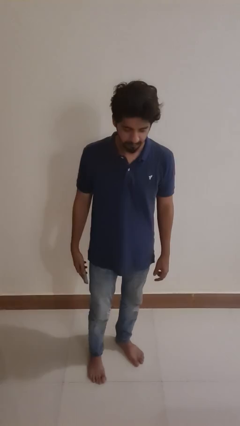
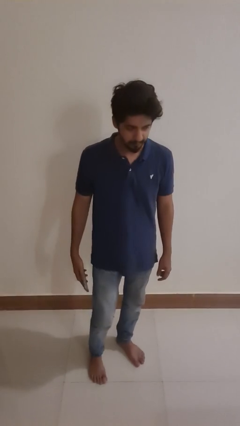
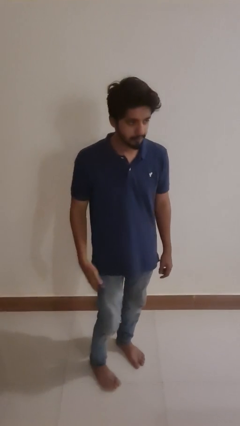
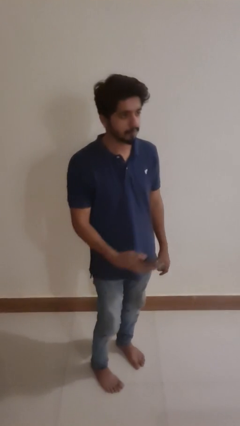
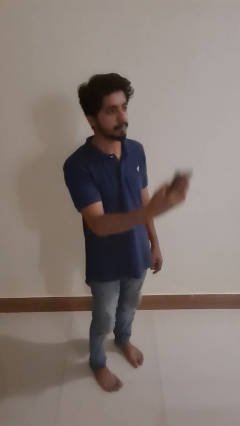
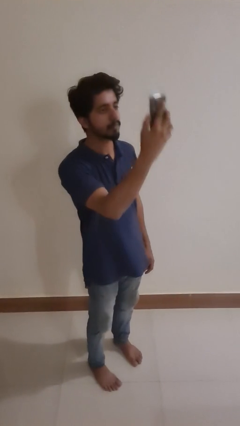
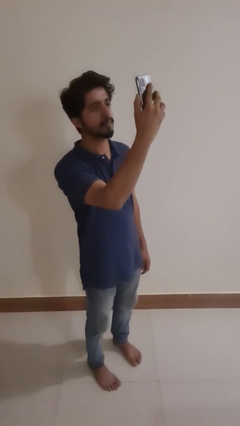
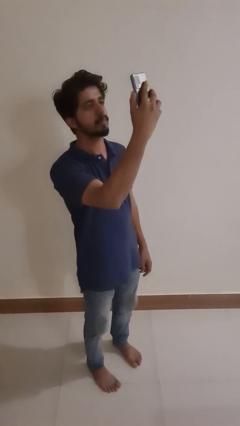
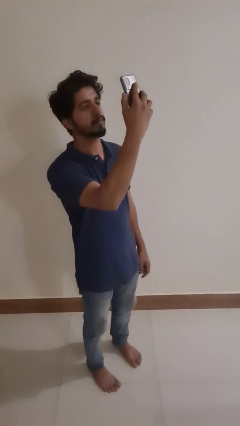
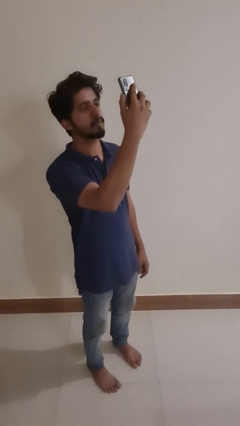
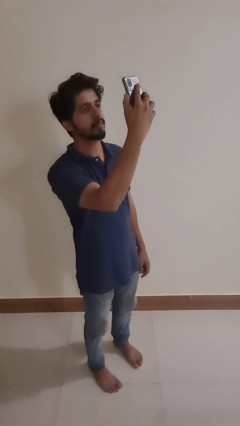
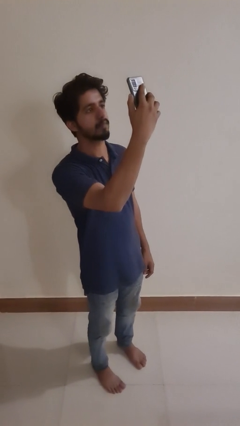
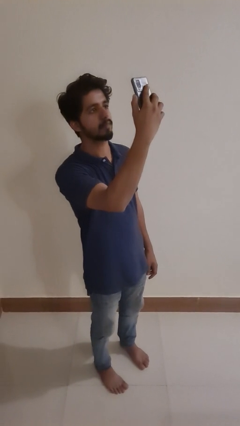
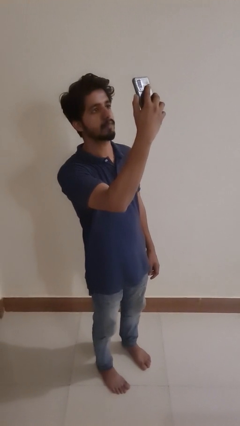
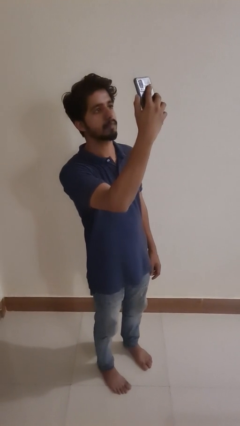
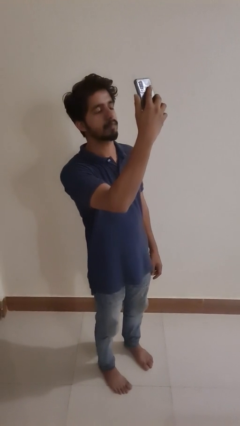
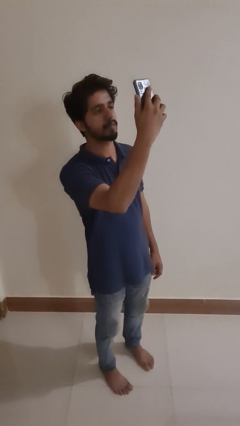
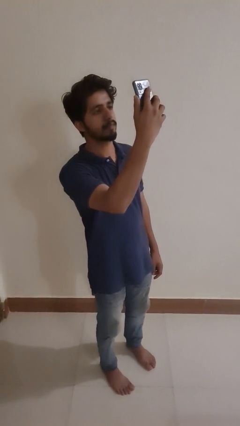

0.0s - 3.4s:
person takes selfie

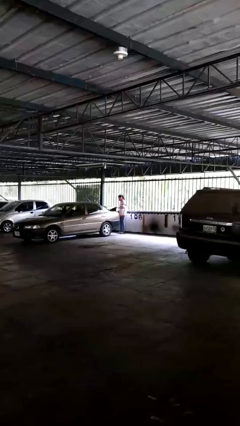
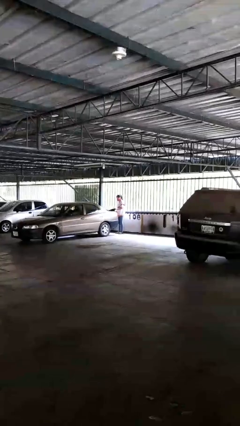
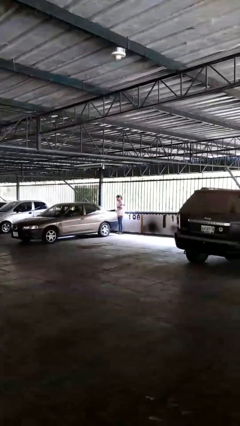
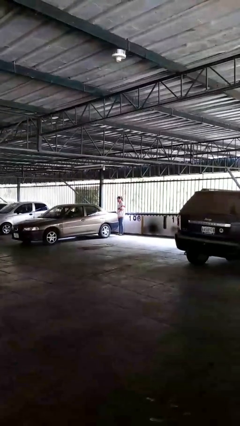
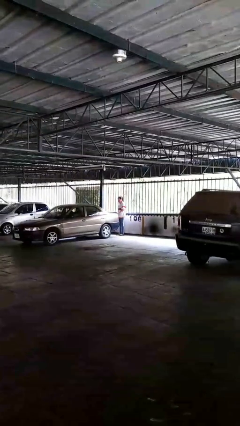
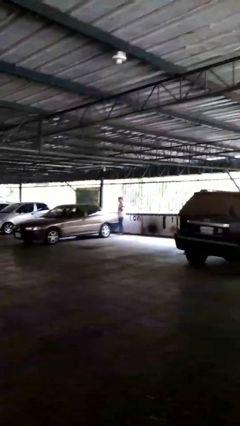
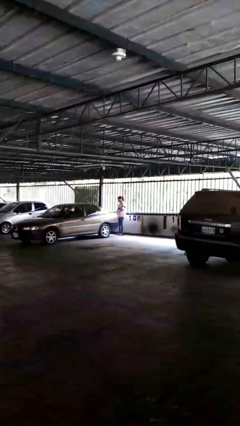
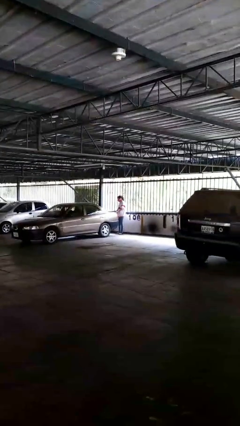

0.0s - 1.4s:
person closes car trunk

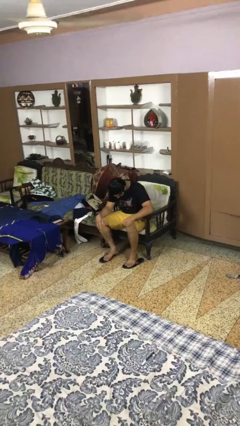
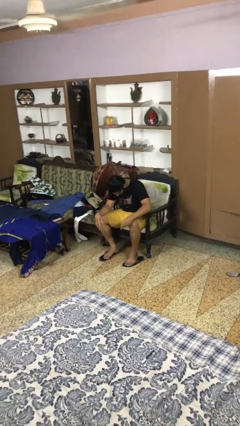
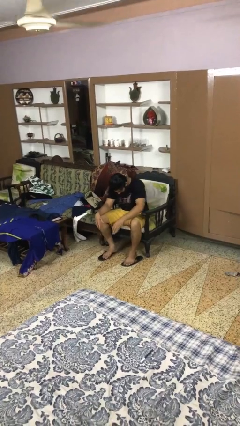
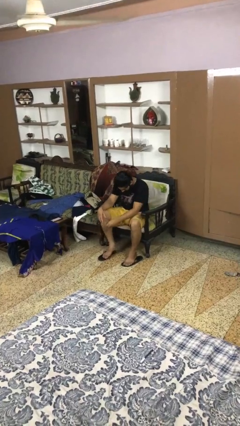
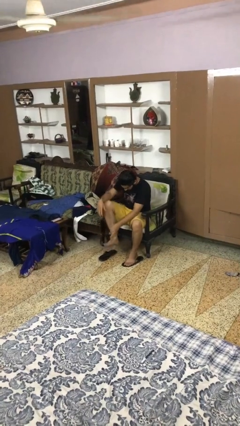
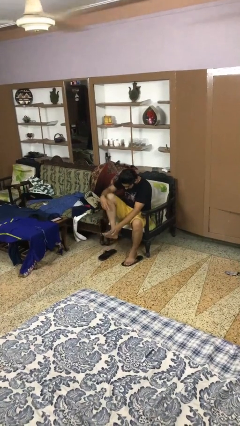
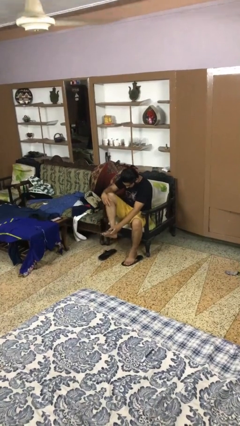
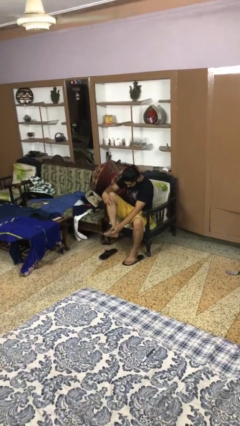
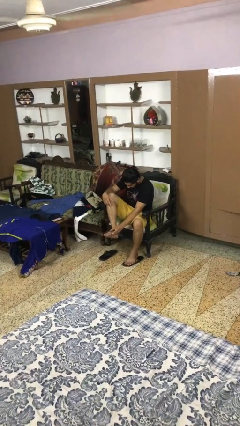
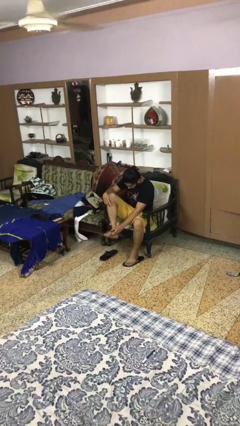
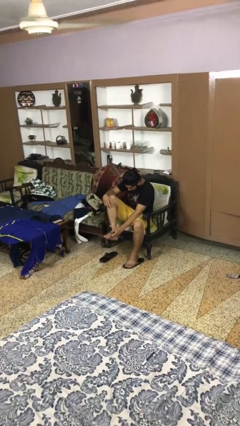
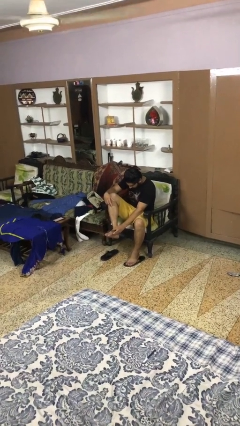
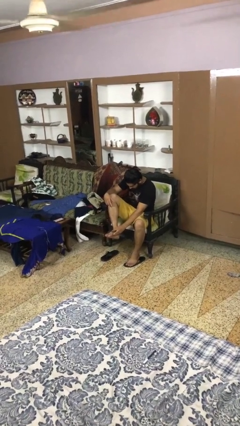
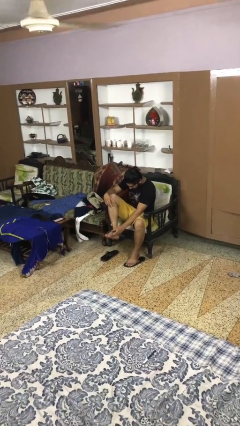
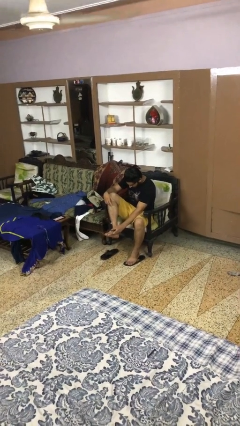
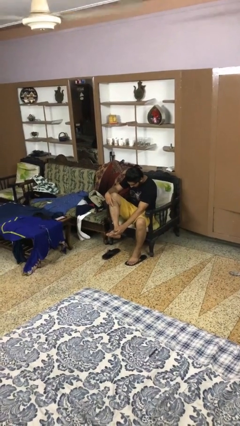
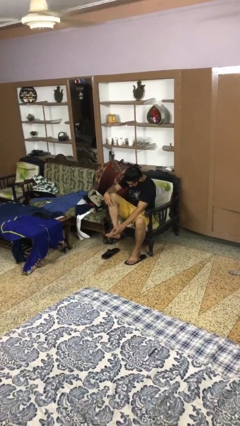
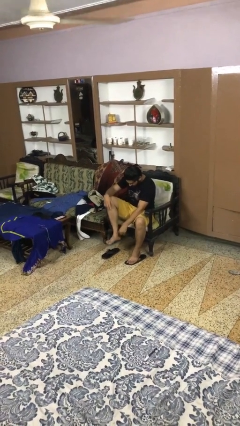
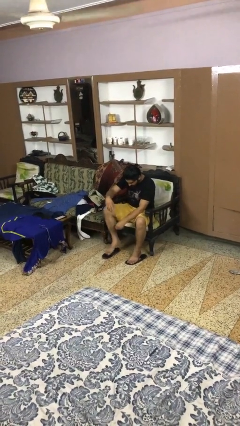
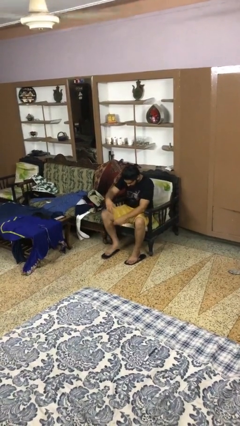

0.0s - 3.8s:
person rubs foot

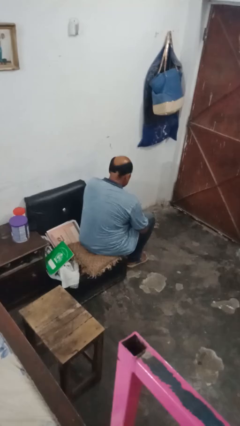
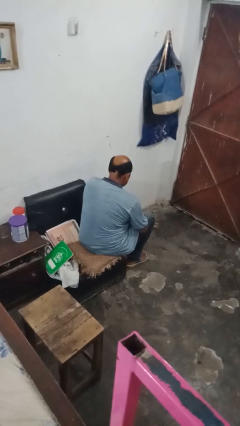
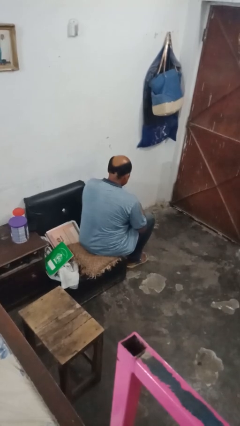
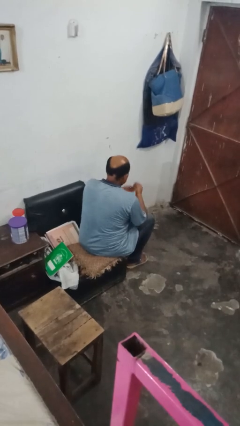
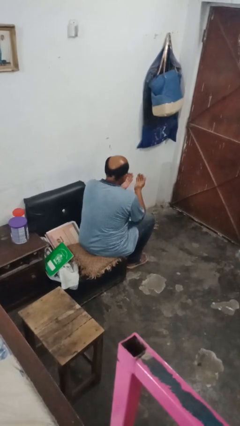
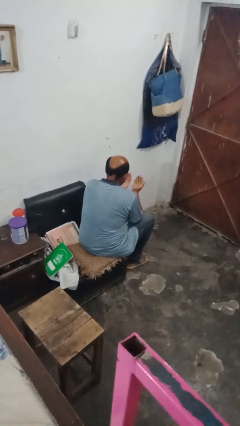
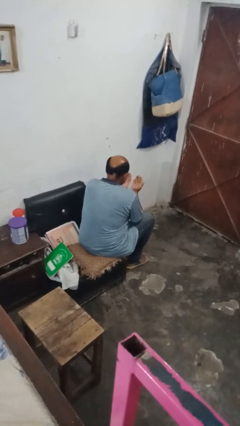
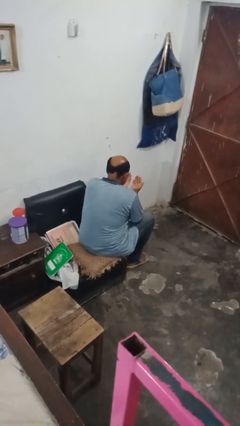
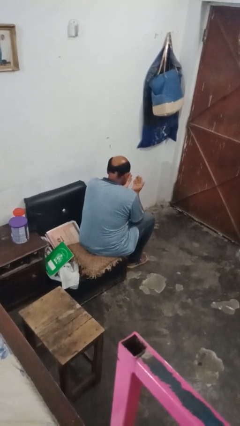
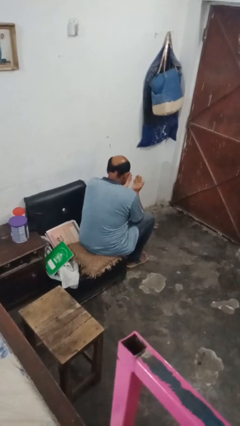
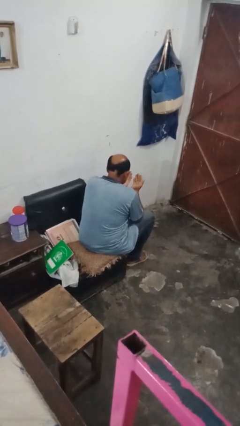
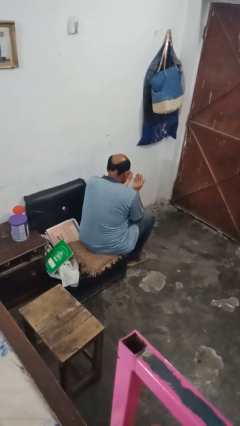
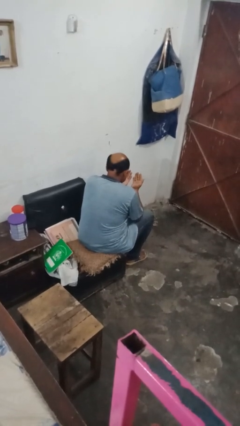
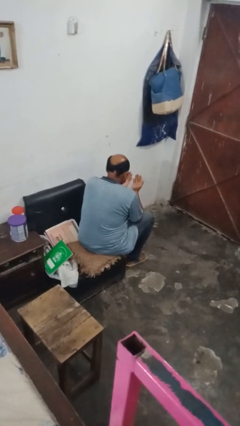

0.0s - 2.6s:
person looks at hands in lap

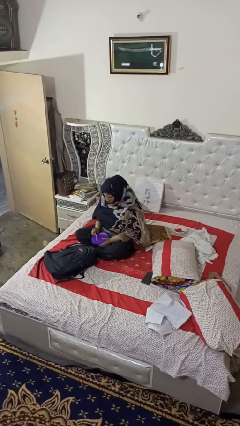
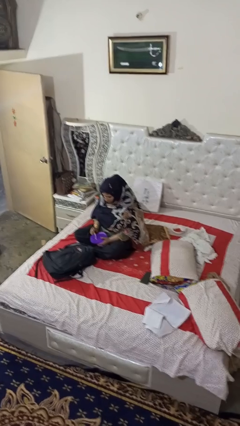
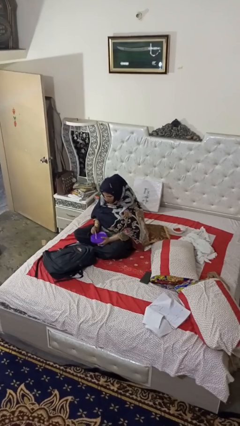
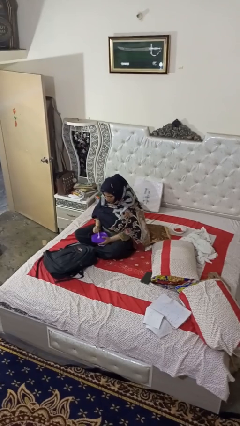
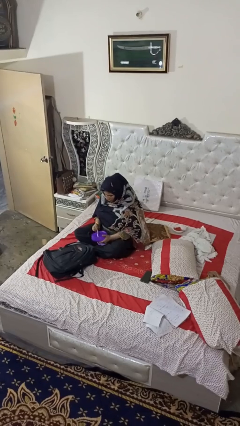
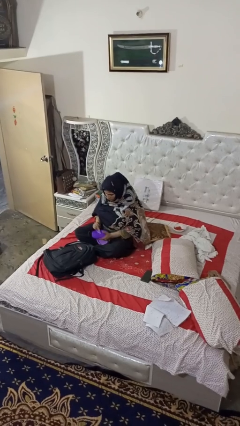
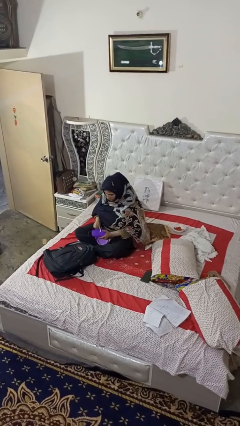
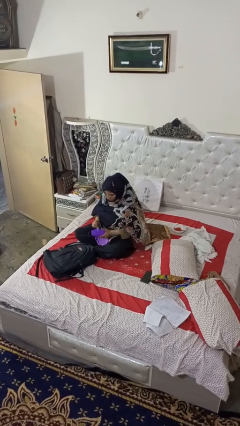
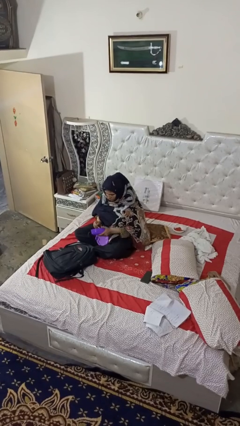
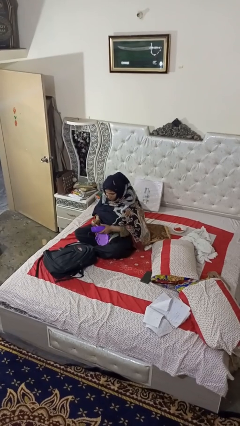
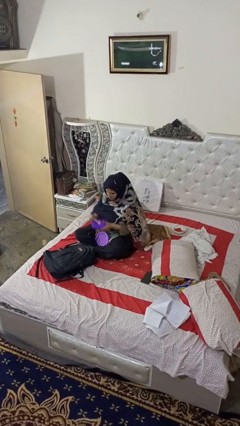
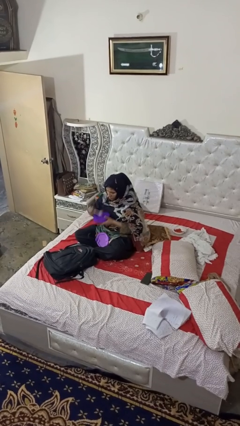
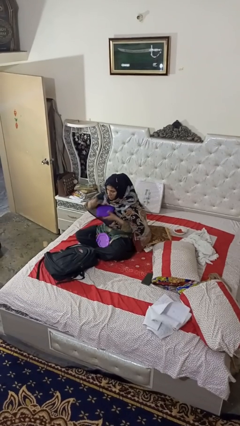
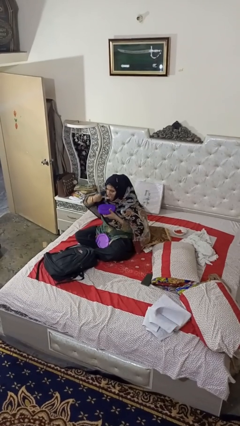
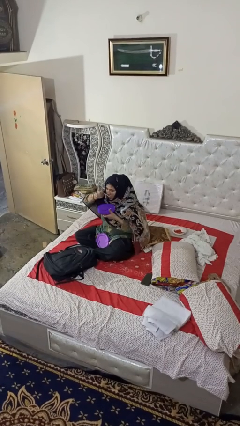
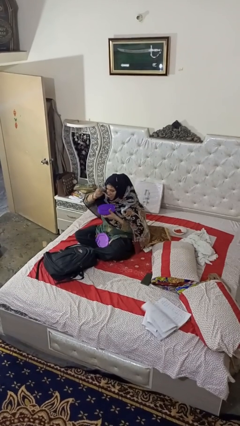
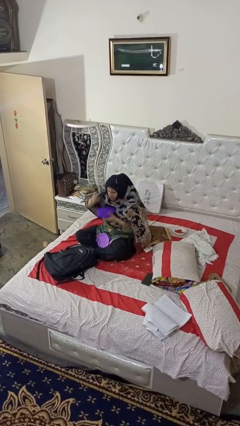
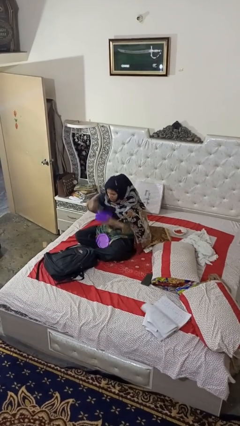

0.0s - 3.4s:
person eats snack from bag

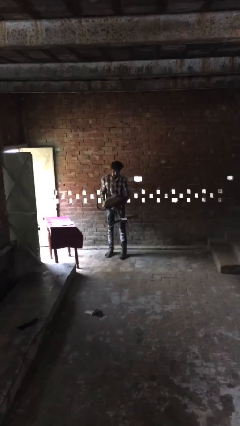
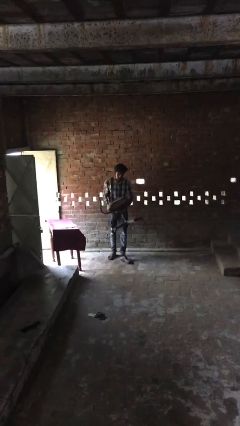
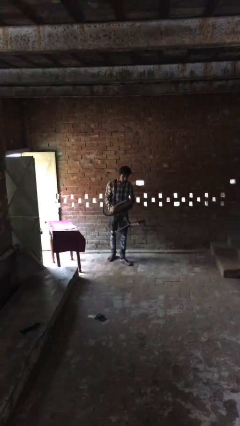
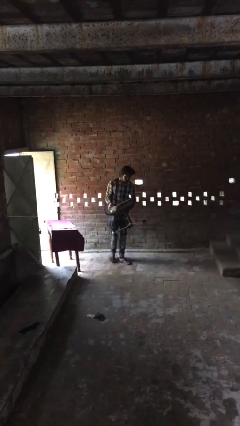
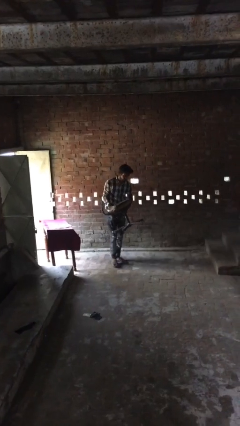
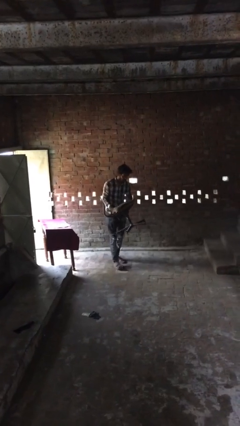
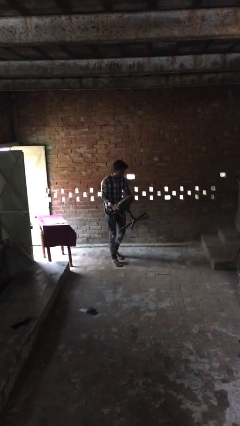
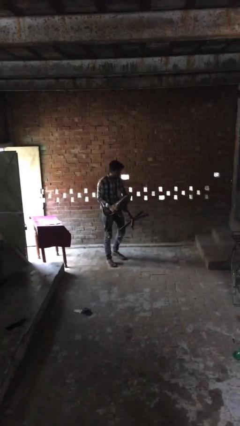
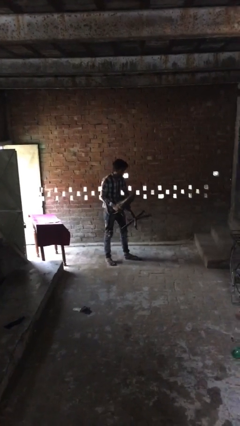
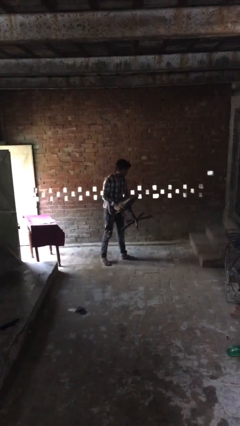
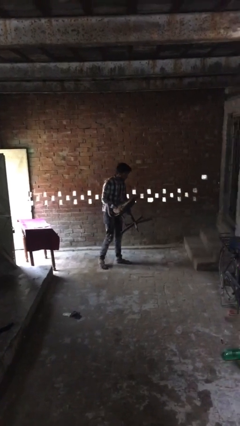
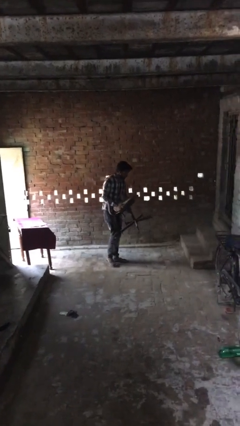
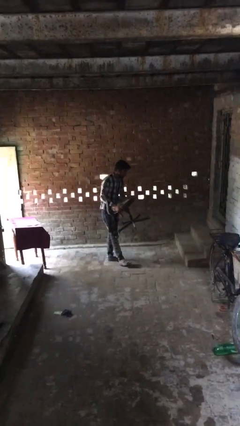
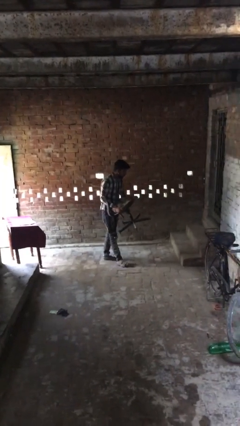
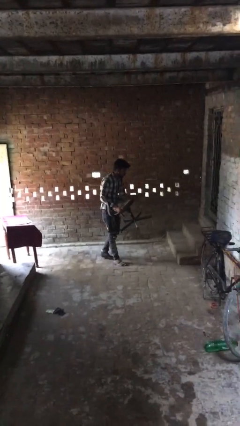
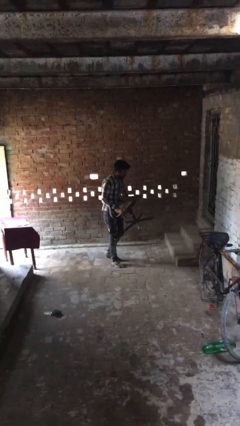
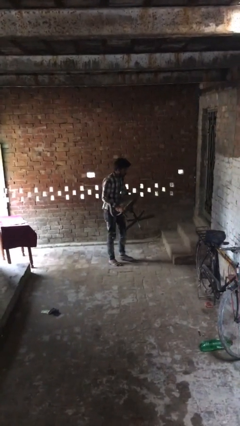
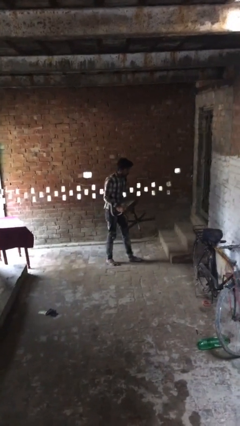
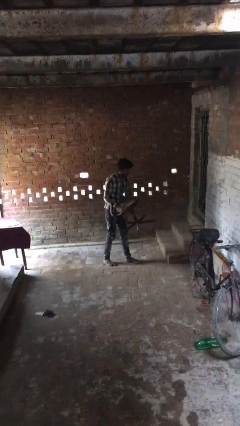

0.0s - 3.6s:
person carries heavy object
